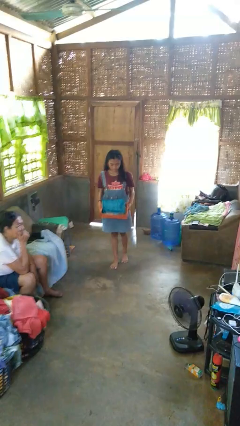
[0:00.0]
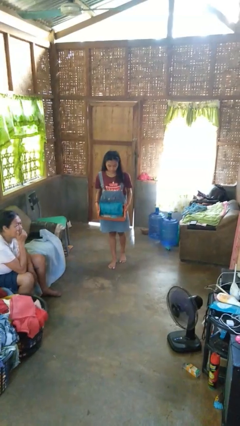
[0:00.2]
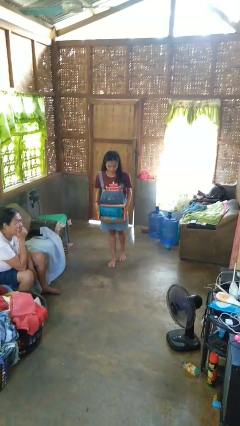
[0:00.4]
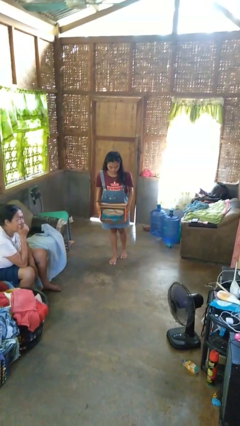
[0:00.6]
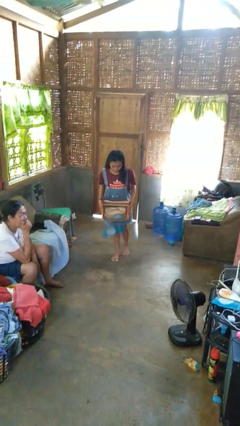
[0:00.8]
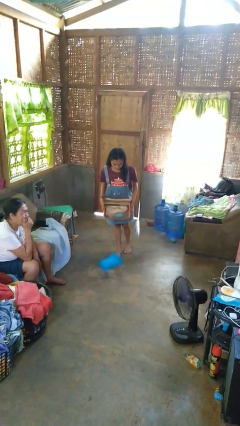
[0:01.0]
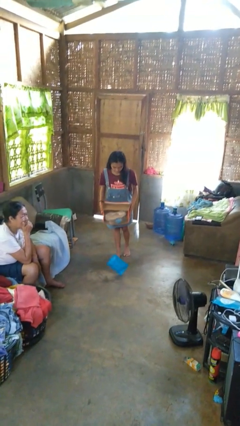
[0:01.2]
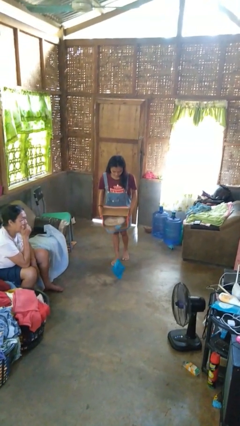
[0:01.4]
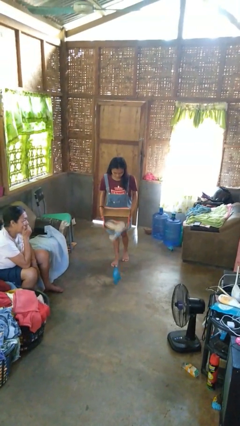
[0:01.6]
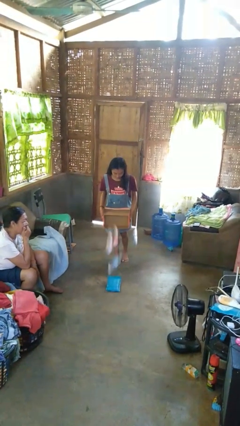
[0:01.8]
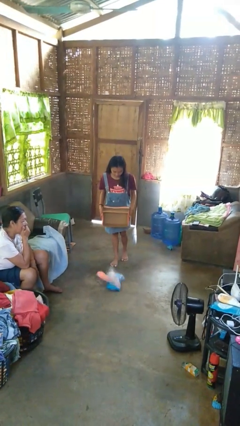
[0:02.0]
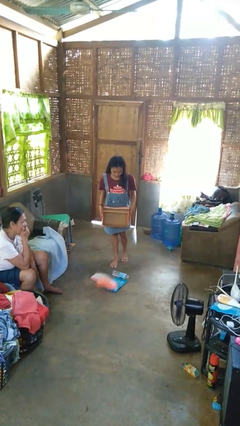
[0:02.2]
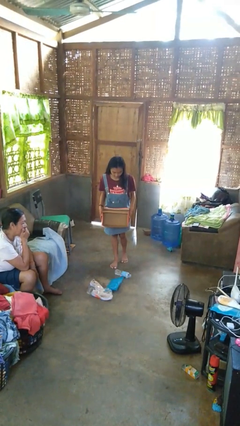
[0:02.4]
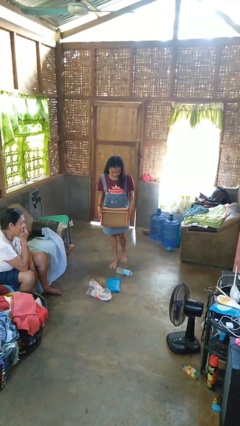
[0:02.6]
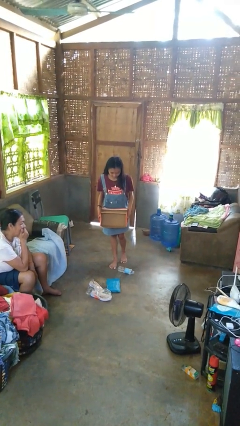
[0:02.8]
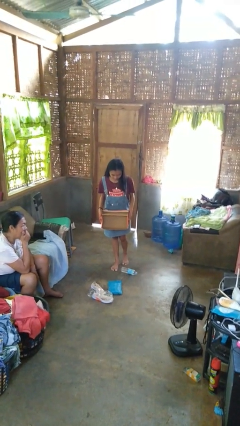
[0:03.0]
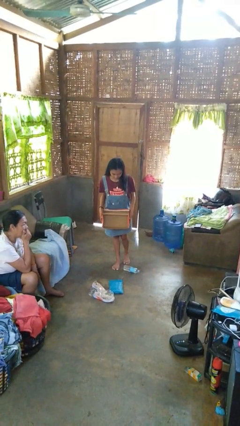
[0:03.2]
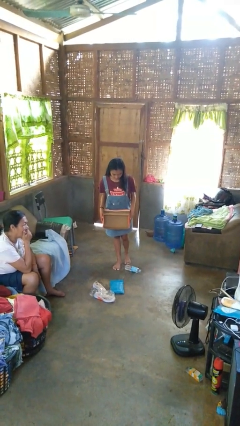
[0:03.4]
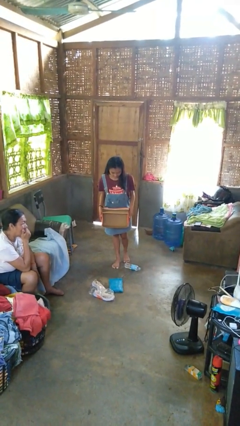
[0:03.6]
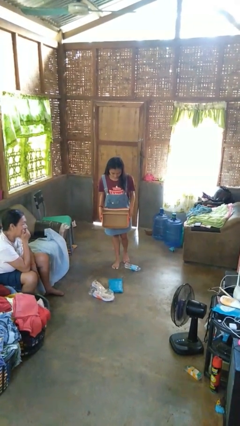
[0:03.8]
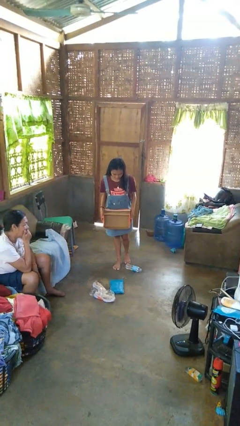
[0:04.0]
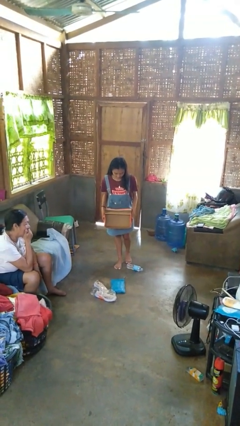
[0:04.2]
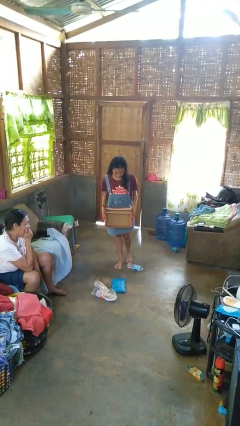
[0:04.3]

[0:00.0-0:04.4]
person unloads box onto floor

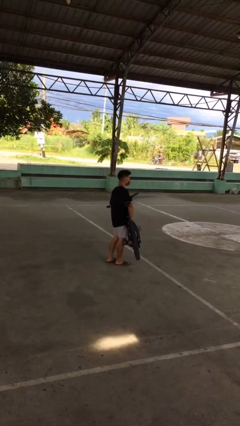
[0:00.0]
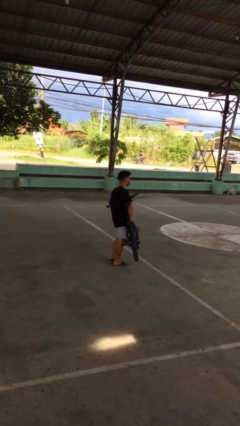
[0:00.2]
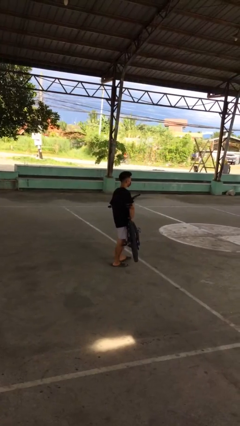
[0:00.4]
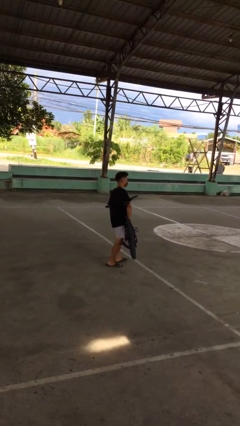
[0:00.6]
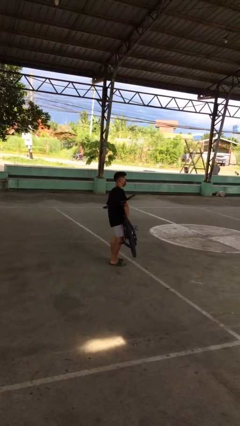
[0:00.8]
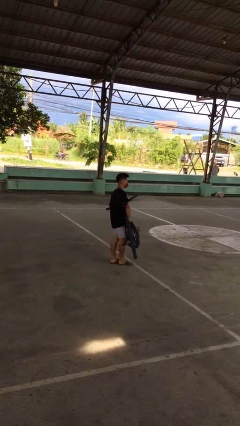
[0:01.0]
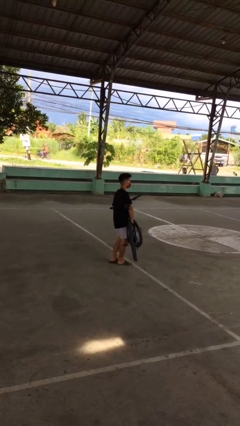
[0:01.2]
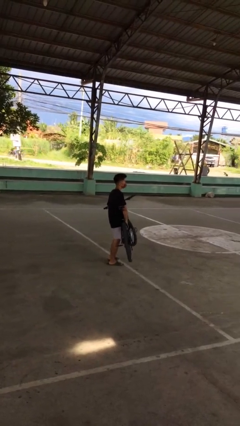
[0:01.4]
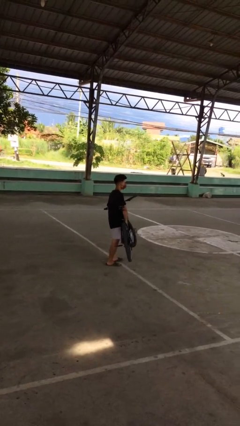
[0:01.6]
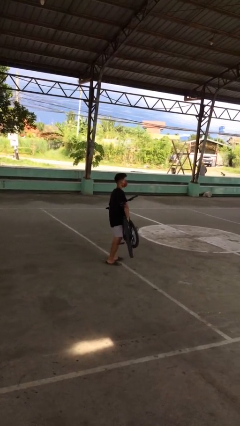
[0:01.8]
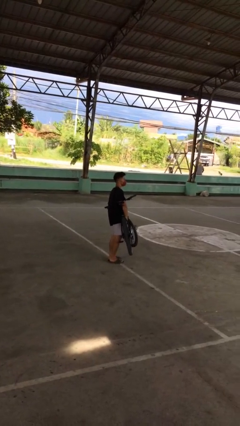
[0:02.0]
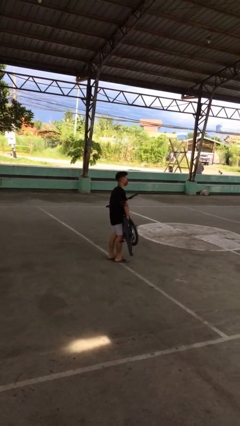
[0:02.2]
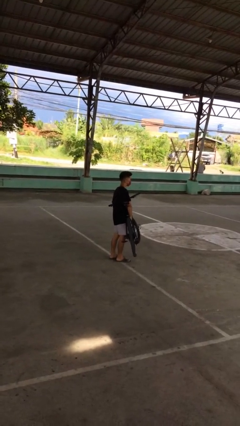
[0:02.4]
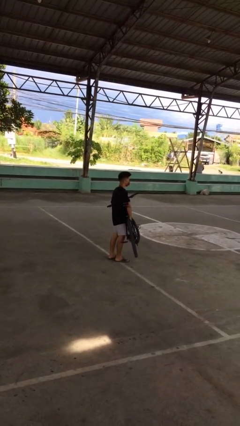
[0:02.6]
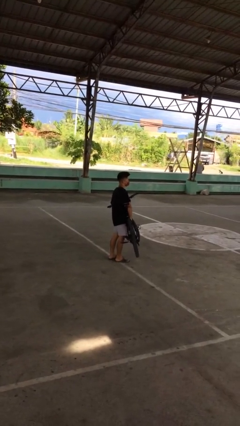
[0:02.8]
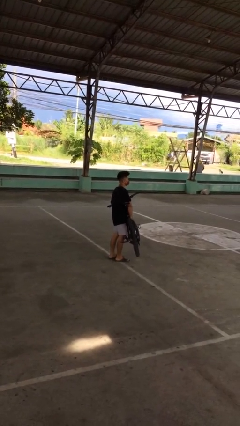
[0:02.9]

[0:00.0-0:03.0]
person carries bicycle

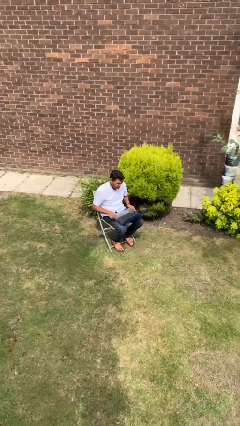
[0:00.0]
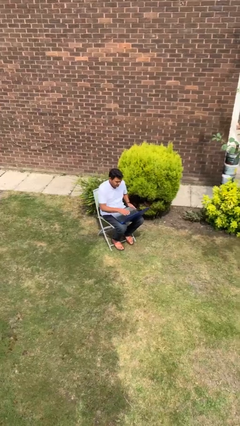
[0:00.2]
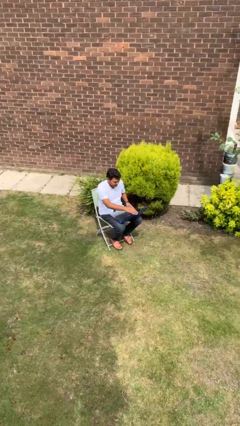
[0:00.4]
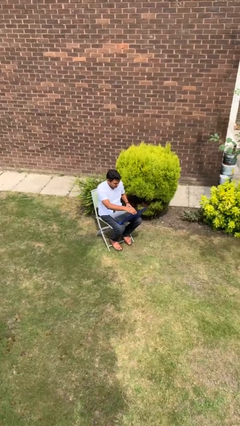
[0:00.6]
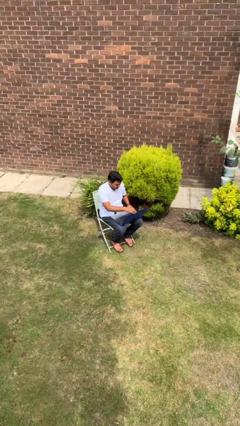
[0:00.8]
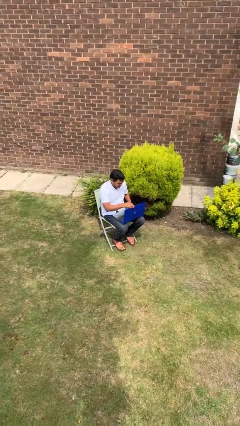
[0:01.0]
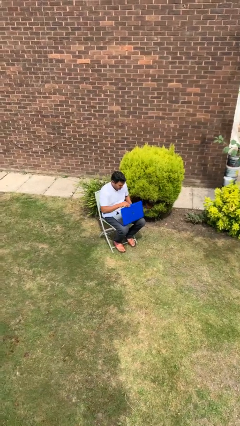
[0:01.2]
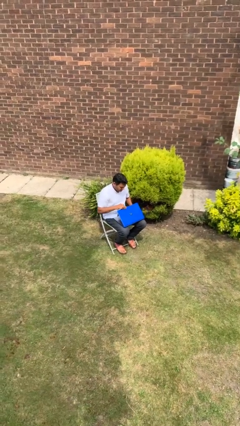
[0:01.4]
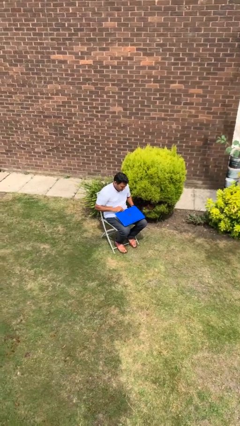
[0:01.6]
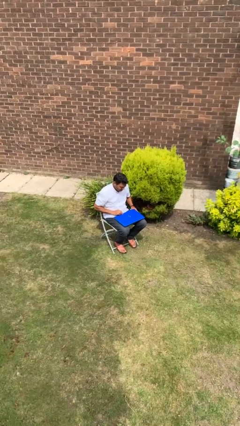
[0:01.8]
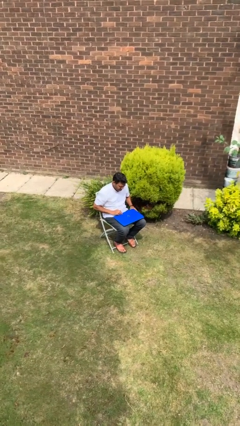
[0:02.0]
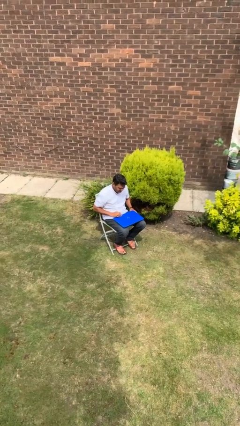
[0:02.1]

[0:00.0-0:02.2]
person closes laptop

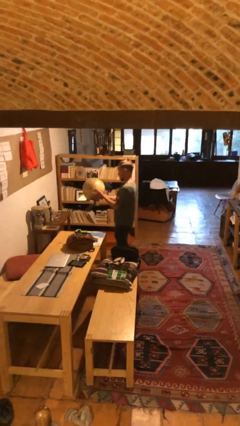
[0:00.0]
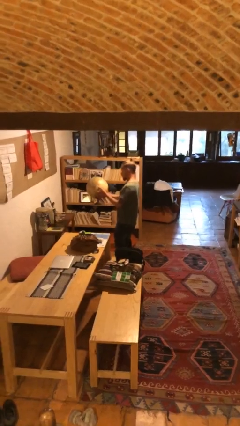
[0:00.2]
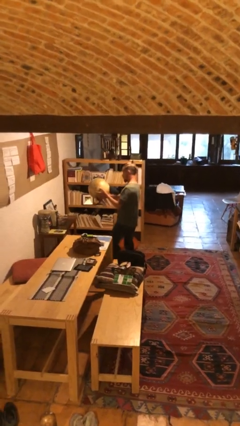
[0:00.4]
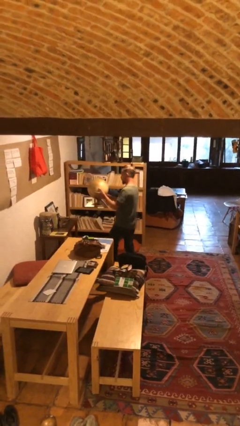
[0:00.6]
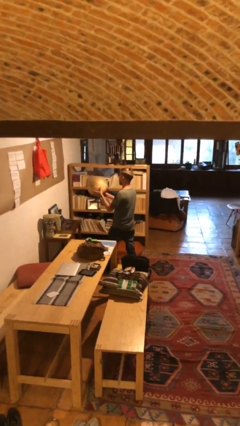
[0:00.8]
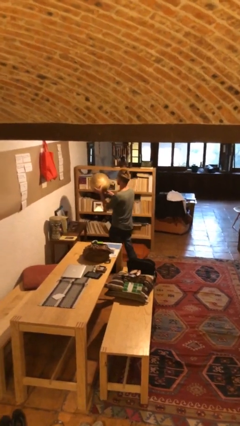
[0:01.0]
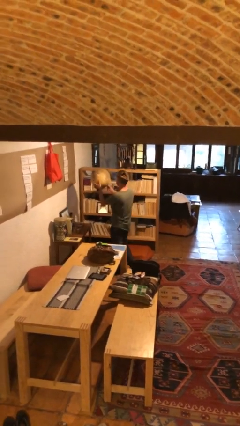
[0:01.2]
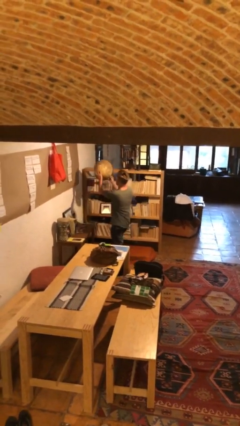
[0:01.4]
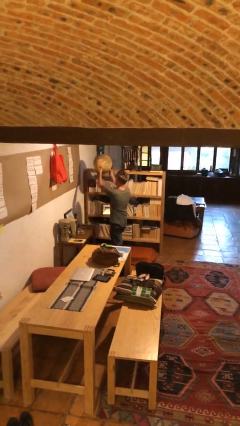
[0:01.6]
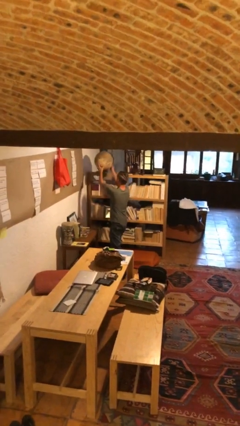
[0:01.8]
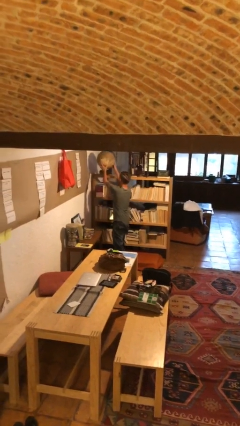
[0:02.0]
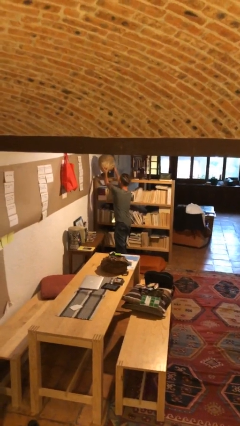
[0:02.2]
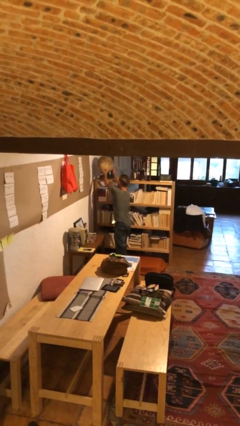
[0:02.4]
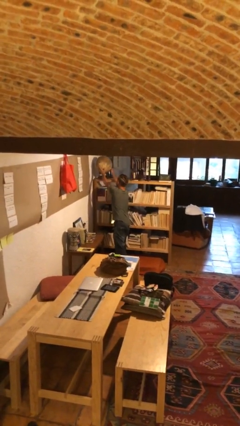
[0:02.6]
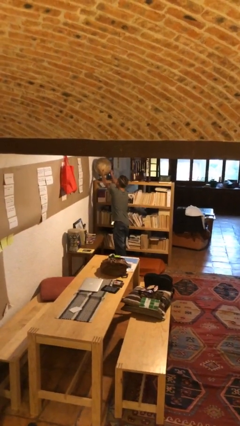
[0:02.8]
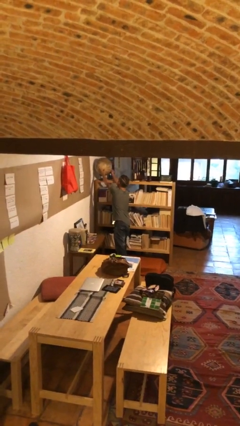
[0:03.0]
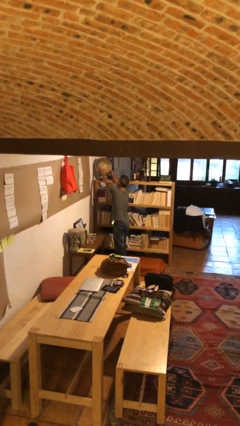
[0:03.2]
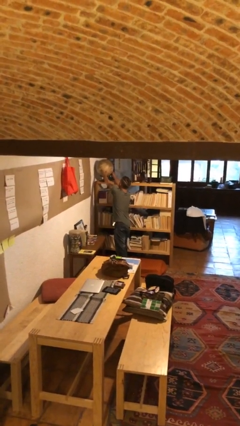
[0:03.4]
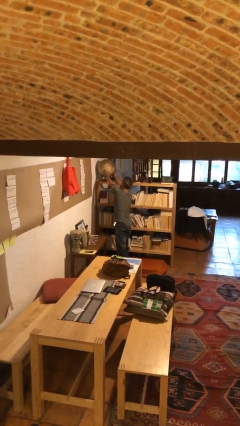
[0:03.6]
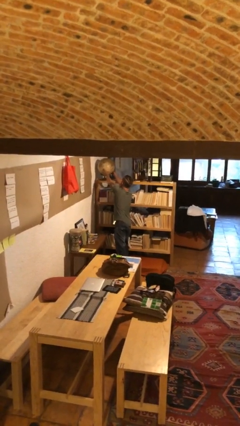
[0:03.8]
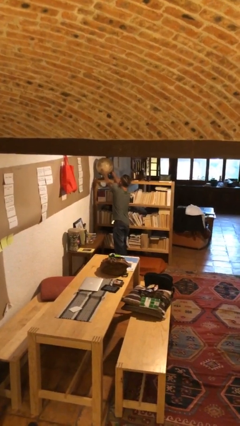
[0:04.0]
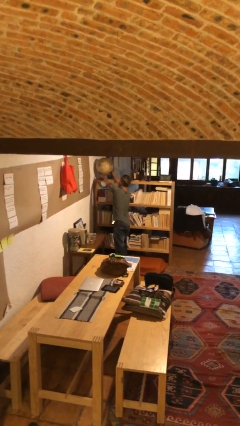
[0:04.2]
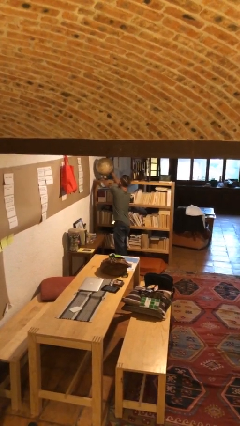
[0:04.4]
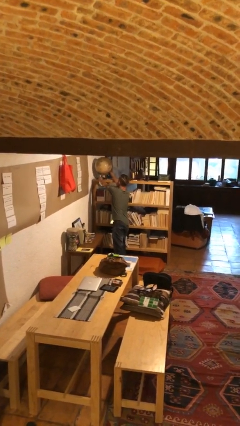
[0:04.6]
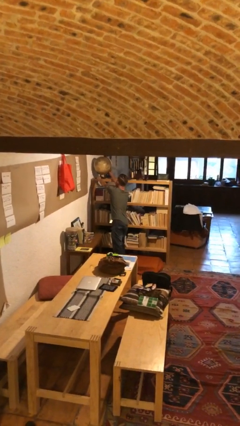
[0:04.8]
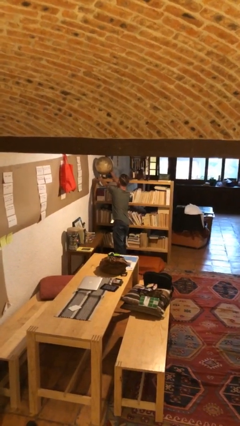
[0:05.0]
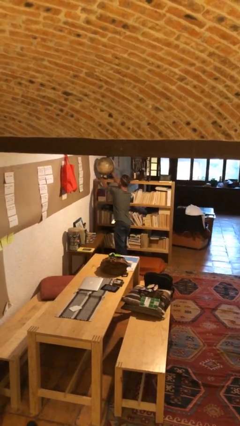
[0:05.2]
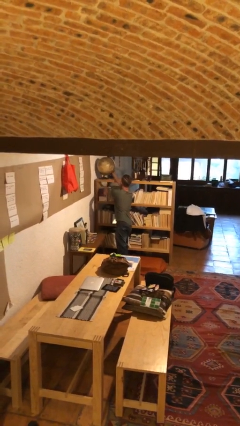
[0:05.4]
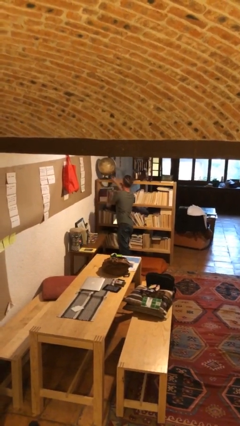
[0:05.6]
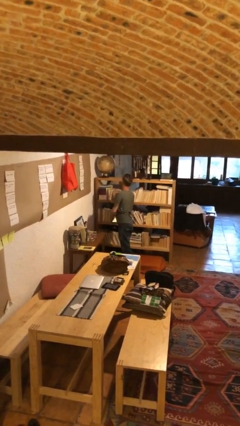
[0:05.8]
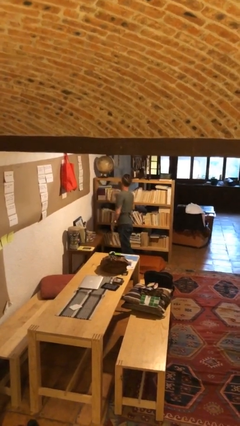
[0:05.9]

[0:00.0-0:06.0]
person puts down object on shelf

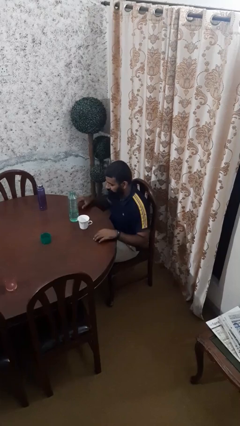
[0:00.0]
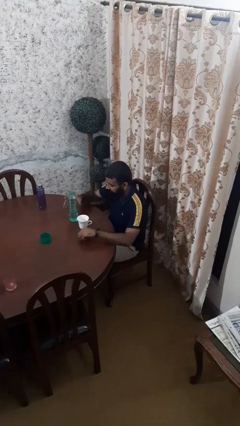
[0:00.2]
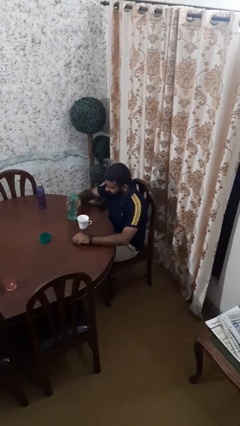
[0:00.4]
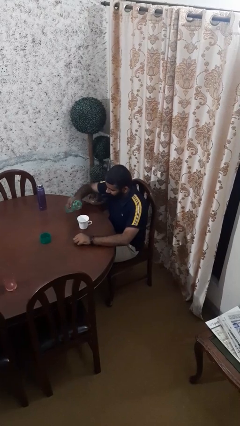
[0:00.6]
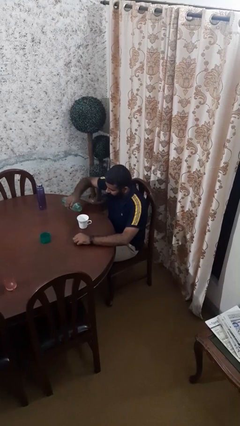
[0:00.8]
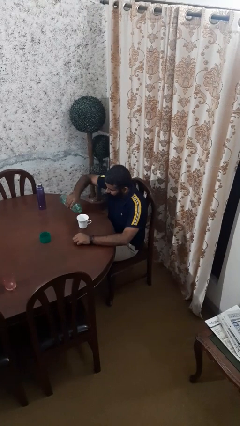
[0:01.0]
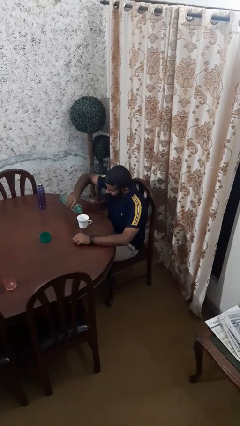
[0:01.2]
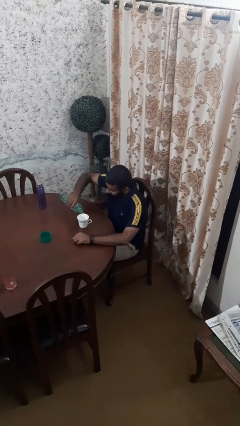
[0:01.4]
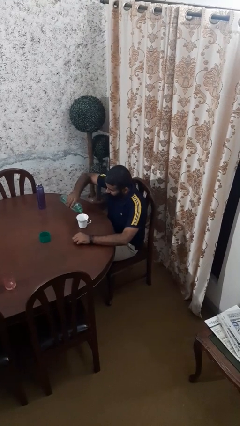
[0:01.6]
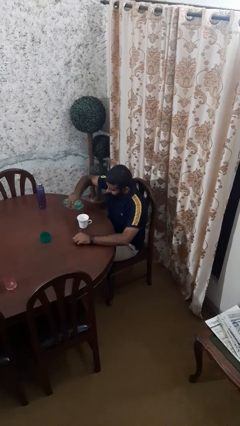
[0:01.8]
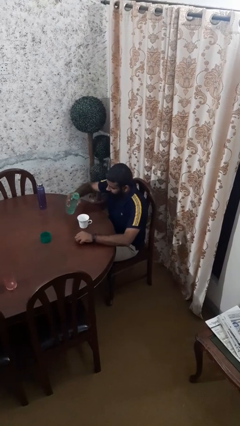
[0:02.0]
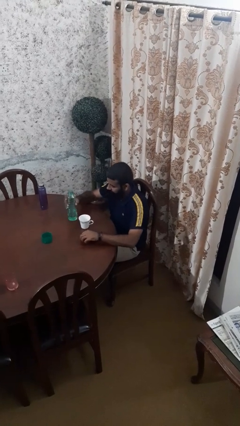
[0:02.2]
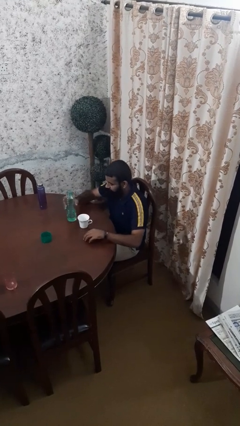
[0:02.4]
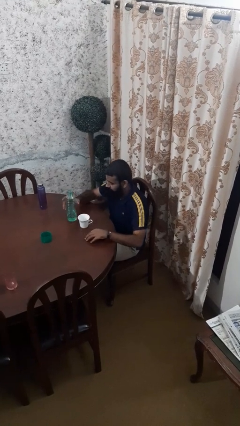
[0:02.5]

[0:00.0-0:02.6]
person pours liquid into cup
